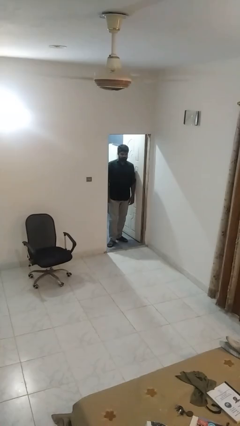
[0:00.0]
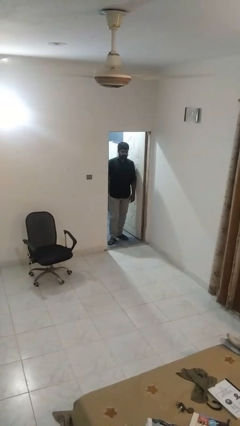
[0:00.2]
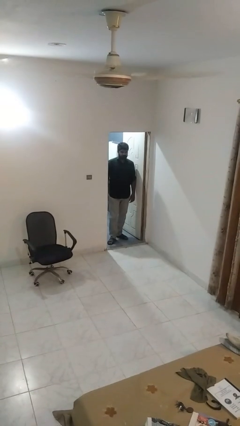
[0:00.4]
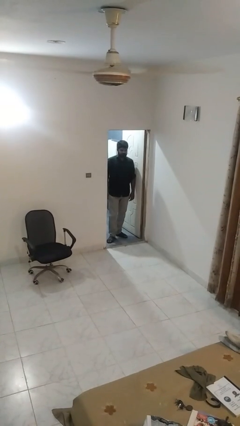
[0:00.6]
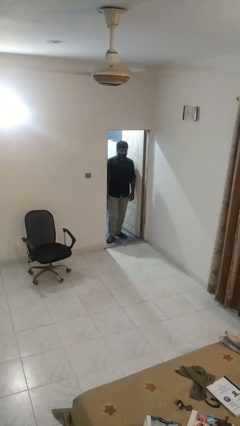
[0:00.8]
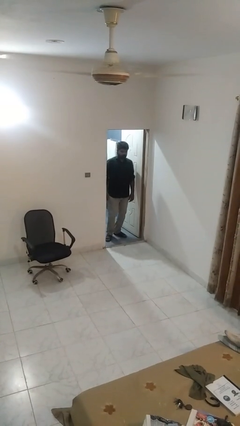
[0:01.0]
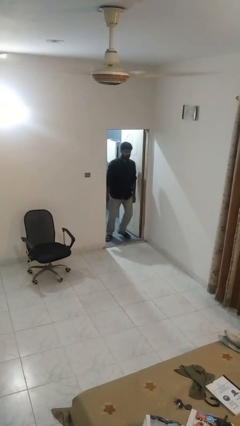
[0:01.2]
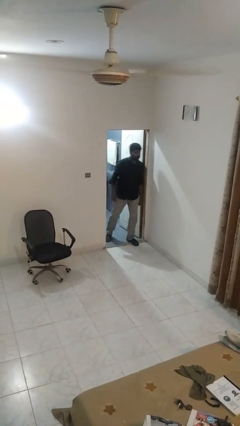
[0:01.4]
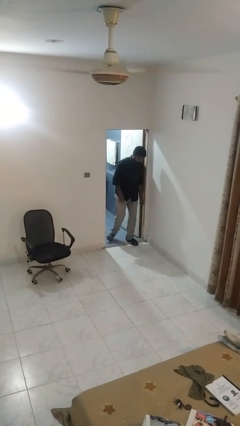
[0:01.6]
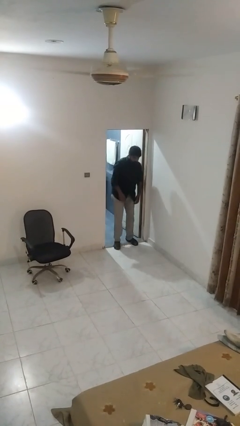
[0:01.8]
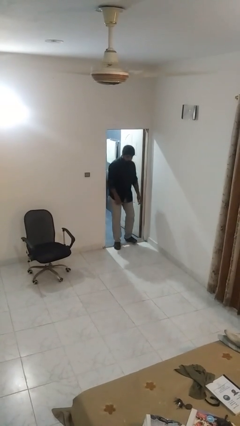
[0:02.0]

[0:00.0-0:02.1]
person bumps into wall

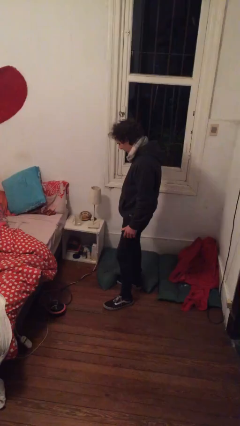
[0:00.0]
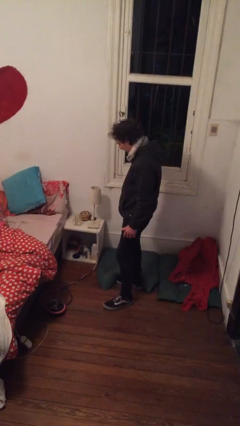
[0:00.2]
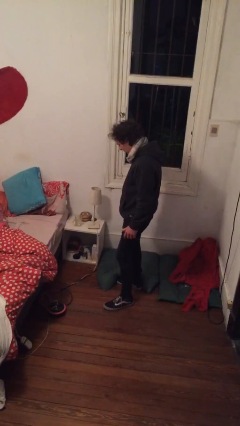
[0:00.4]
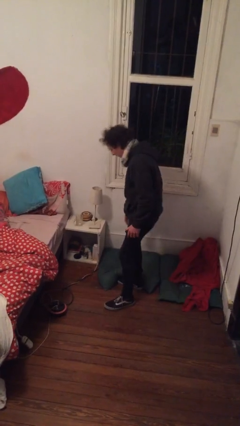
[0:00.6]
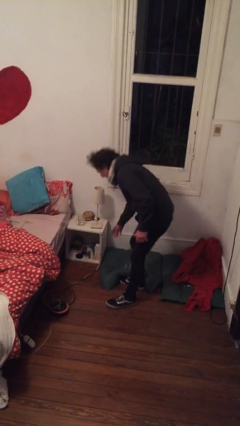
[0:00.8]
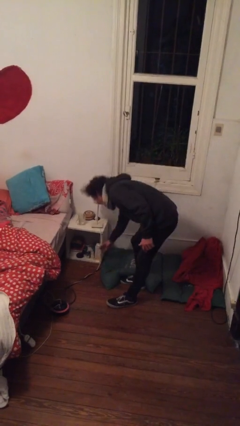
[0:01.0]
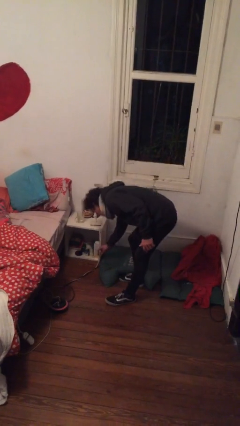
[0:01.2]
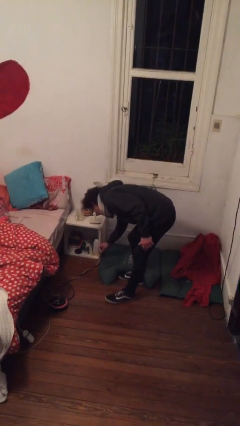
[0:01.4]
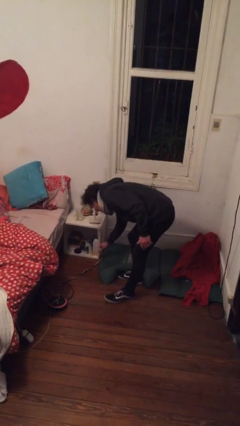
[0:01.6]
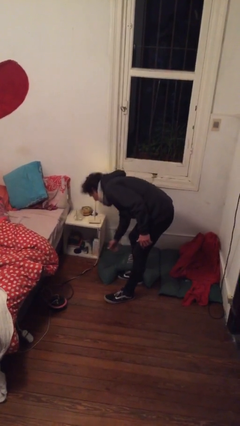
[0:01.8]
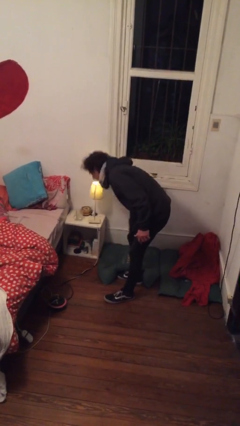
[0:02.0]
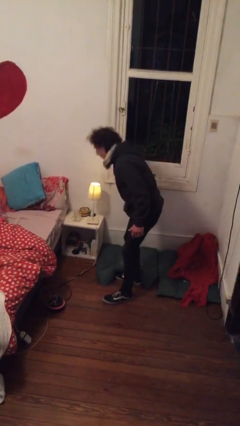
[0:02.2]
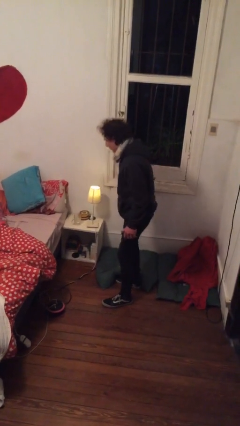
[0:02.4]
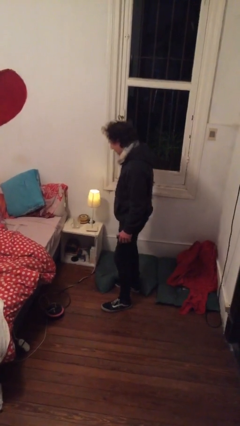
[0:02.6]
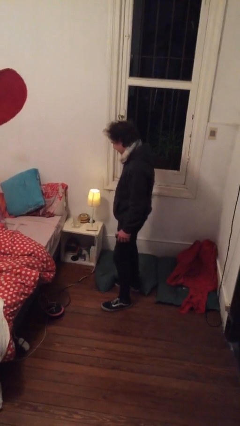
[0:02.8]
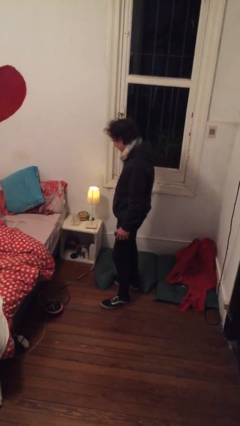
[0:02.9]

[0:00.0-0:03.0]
person turns on lamp

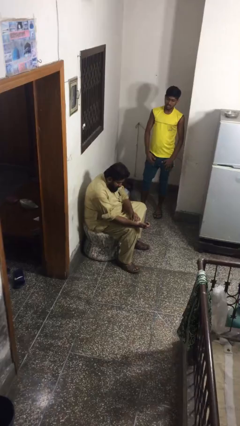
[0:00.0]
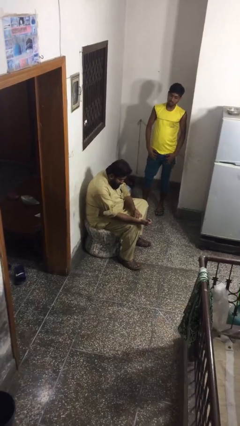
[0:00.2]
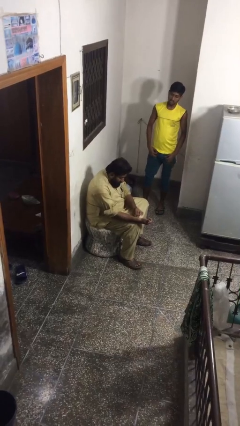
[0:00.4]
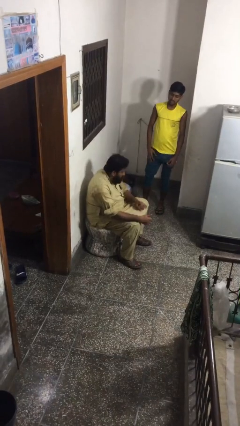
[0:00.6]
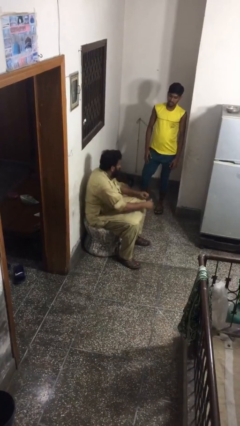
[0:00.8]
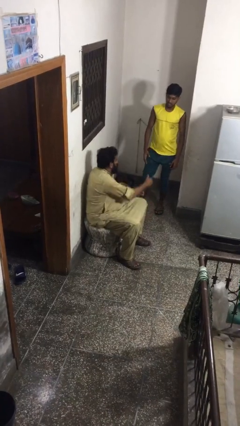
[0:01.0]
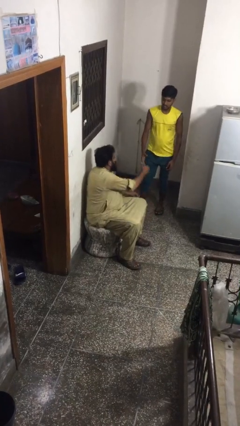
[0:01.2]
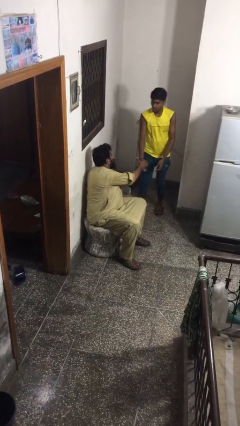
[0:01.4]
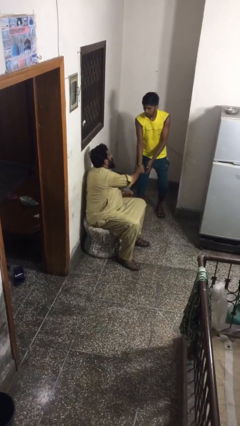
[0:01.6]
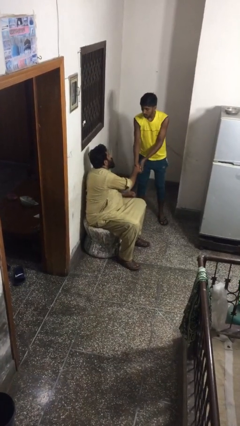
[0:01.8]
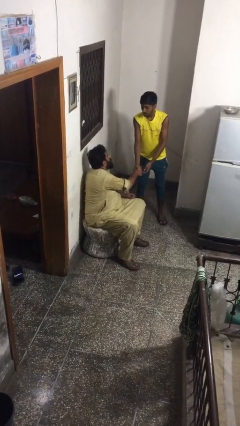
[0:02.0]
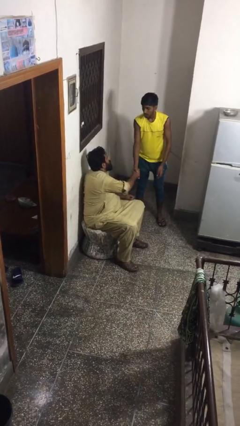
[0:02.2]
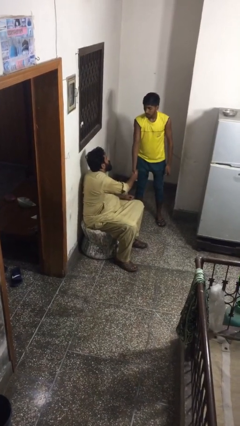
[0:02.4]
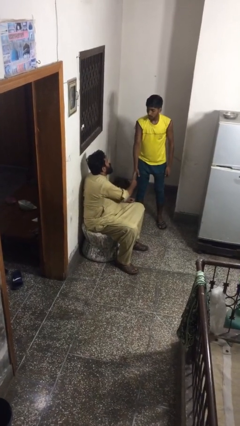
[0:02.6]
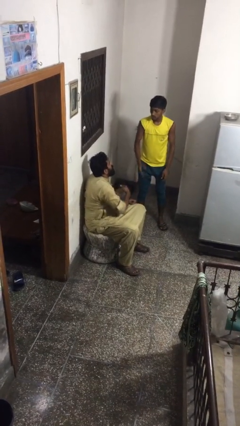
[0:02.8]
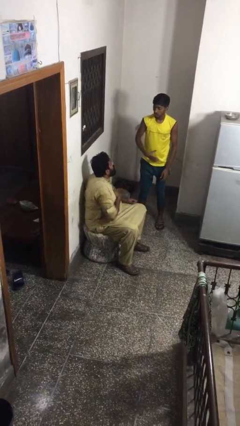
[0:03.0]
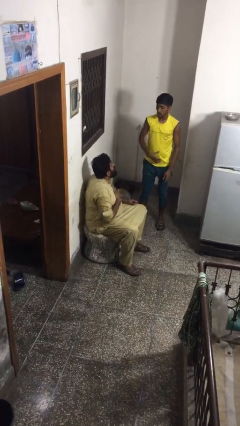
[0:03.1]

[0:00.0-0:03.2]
person shakes hand

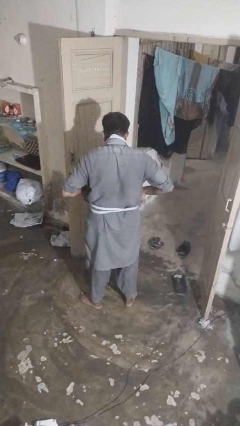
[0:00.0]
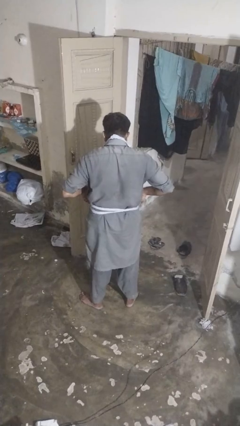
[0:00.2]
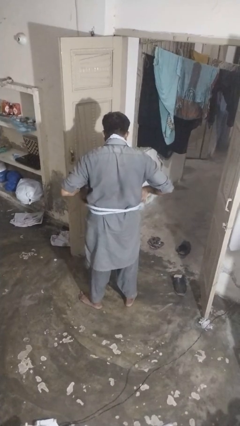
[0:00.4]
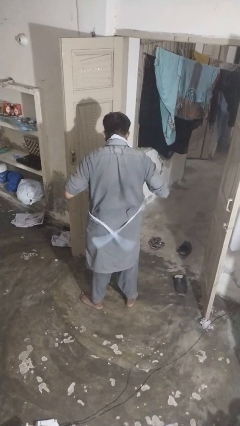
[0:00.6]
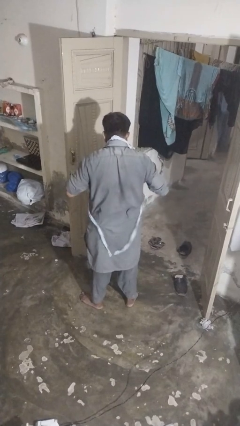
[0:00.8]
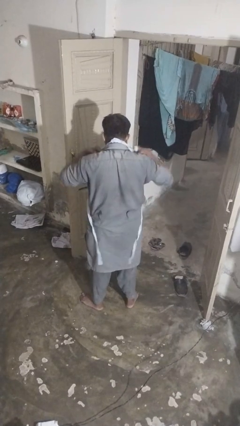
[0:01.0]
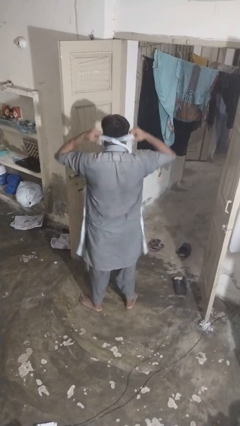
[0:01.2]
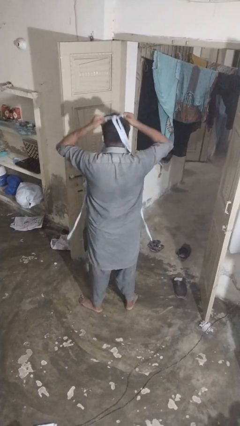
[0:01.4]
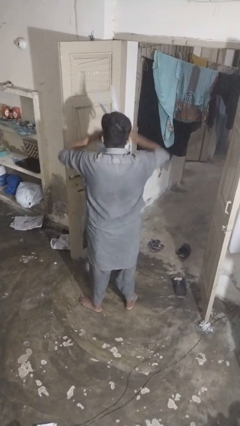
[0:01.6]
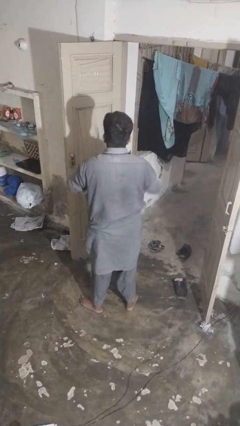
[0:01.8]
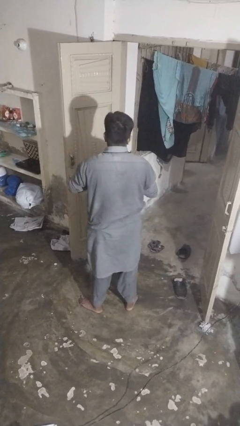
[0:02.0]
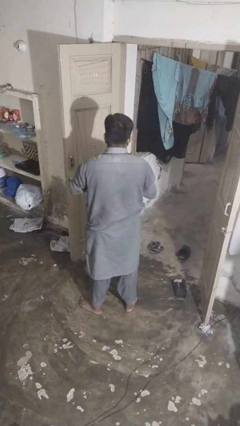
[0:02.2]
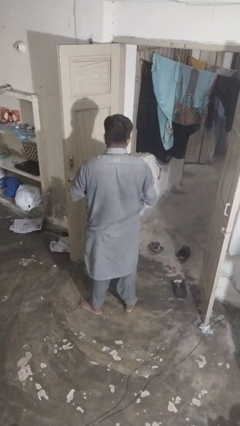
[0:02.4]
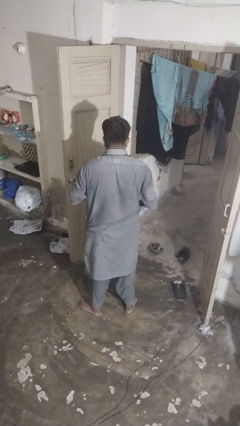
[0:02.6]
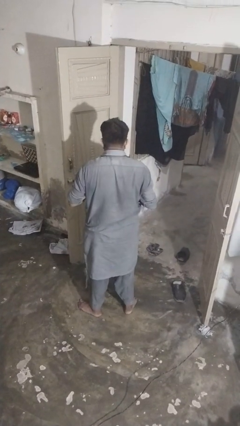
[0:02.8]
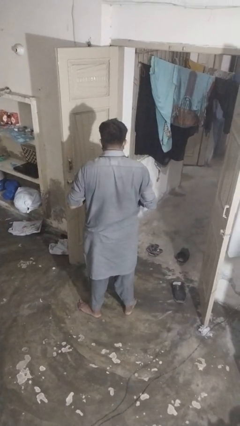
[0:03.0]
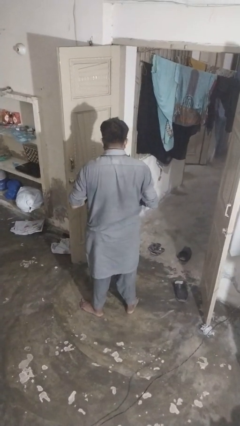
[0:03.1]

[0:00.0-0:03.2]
person takes off apron

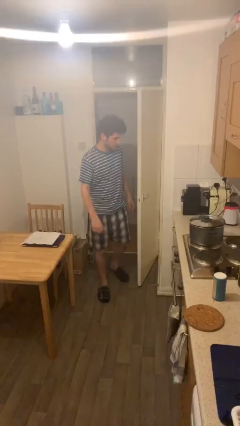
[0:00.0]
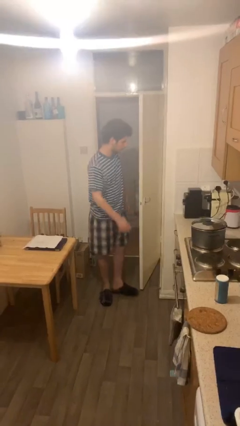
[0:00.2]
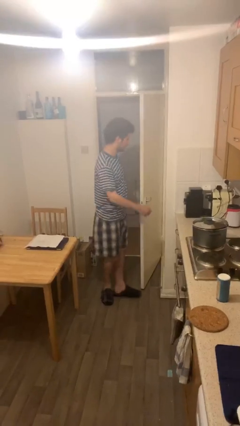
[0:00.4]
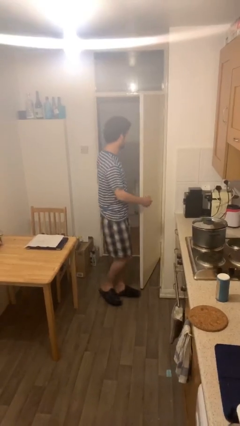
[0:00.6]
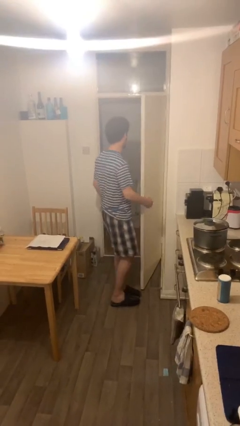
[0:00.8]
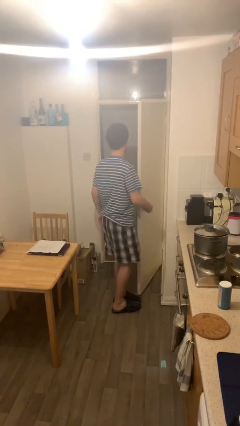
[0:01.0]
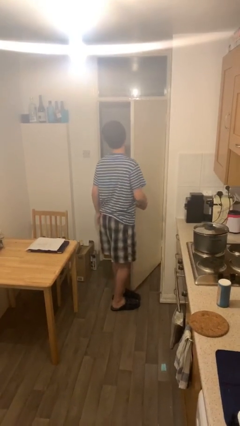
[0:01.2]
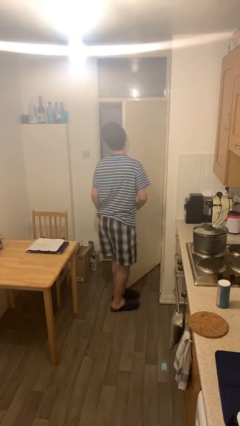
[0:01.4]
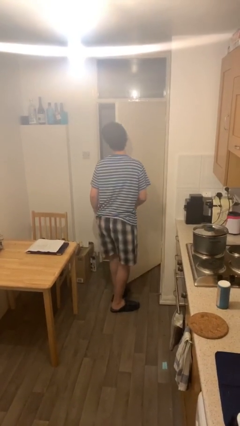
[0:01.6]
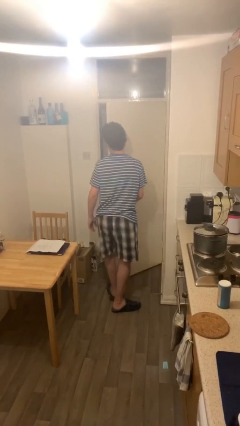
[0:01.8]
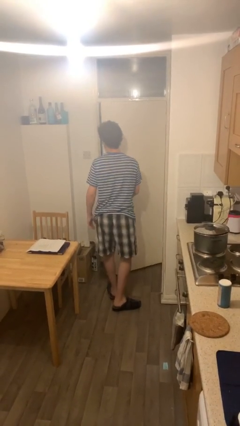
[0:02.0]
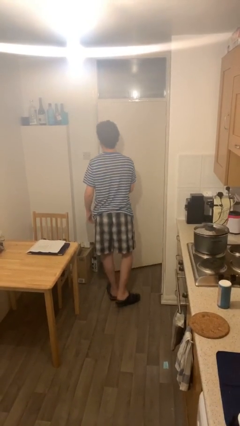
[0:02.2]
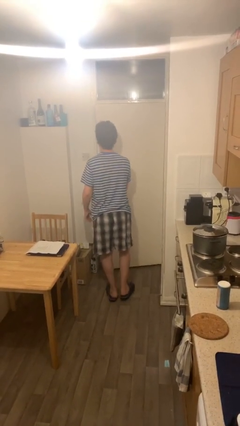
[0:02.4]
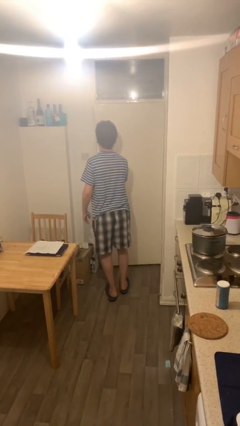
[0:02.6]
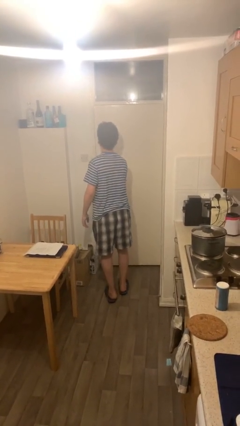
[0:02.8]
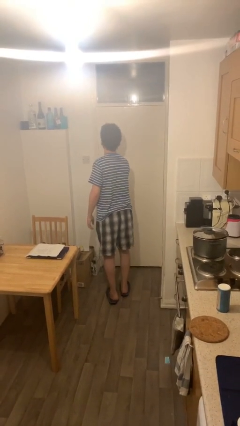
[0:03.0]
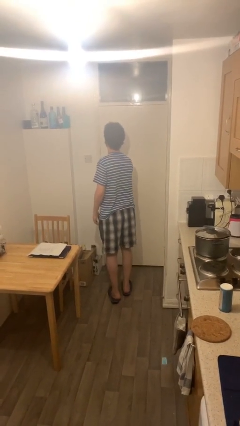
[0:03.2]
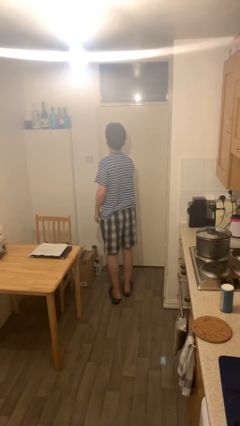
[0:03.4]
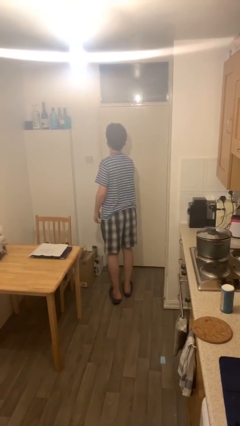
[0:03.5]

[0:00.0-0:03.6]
person closes facility door

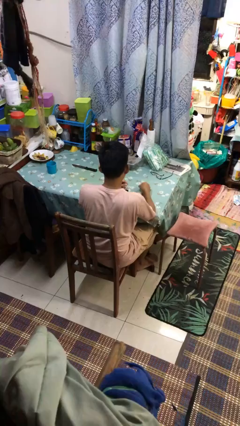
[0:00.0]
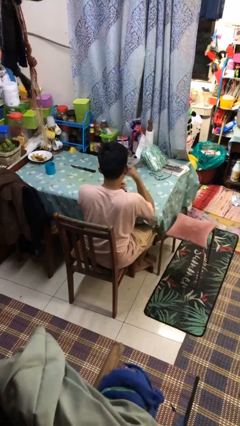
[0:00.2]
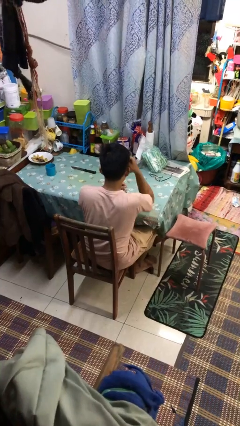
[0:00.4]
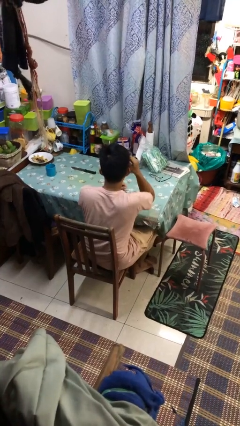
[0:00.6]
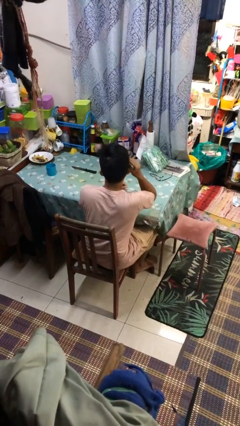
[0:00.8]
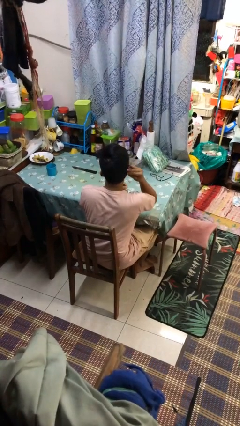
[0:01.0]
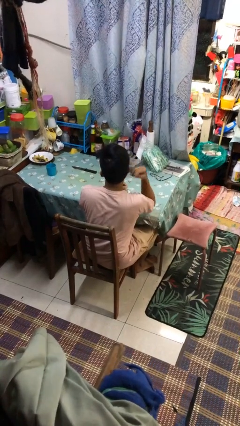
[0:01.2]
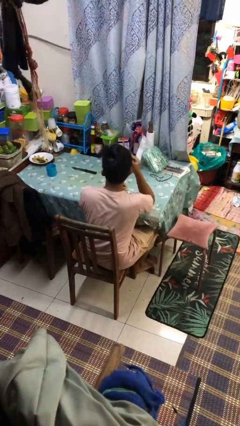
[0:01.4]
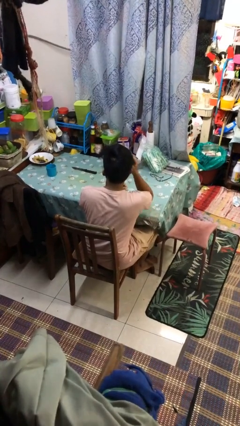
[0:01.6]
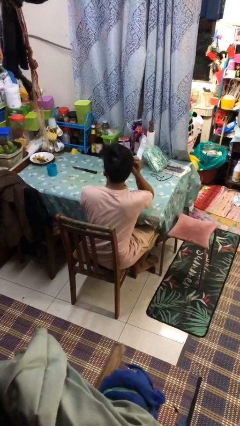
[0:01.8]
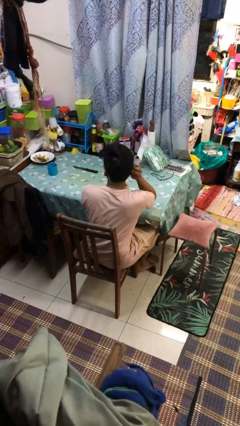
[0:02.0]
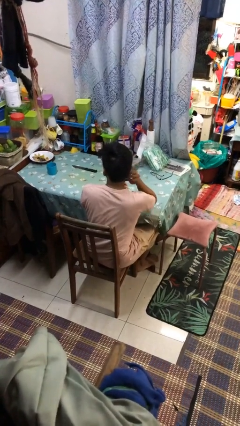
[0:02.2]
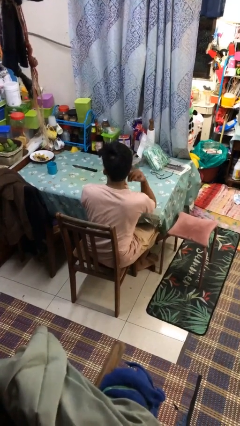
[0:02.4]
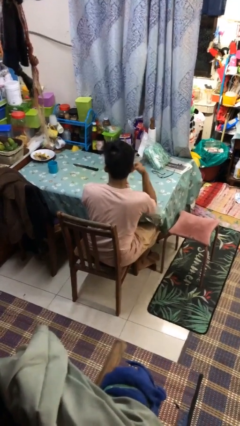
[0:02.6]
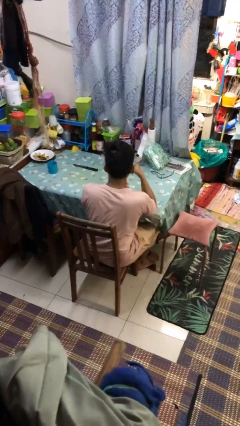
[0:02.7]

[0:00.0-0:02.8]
person strokes hair
